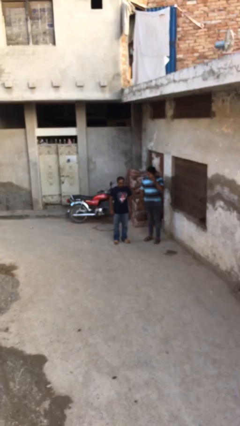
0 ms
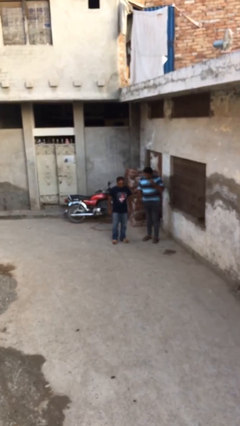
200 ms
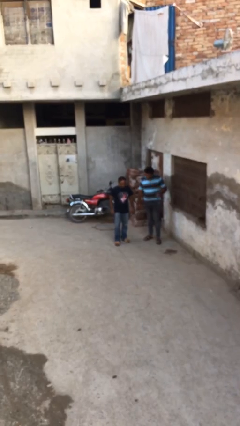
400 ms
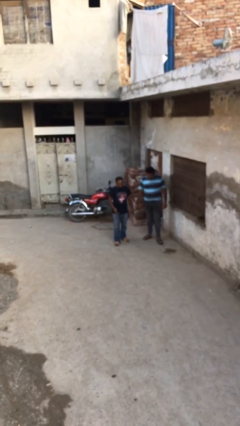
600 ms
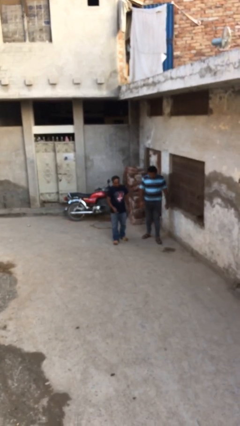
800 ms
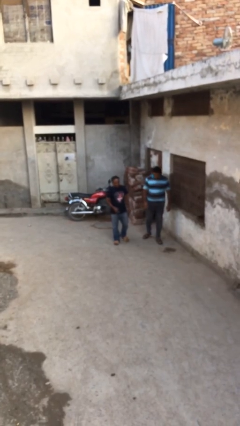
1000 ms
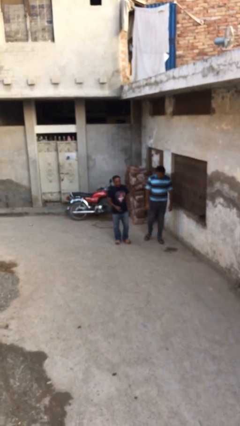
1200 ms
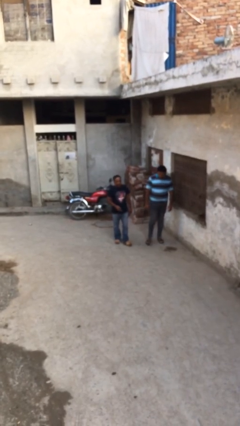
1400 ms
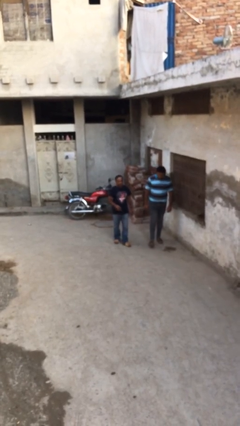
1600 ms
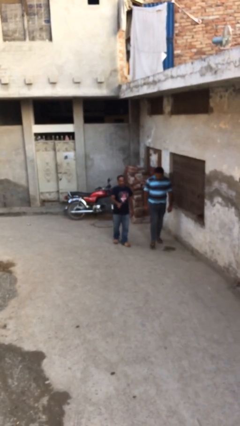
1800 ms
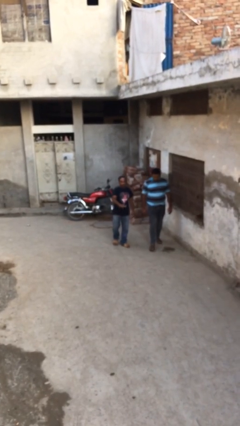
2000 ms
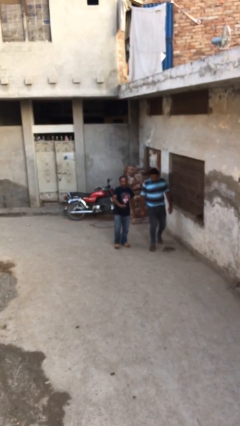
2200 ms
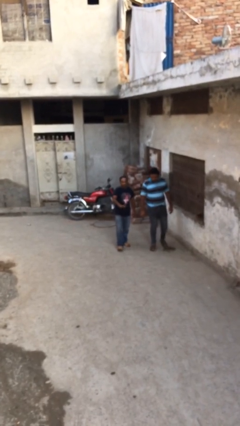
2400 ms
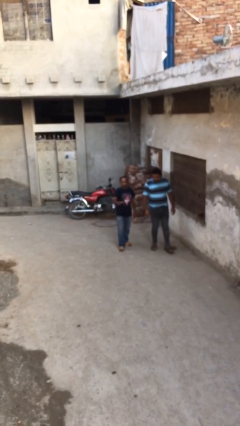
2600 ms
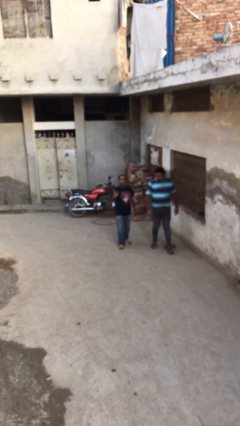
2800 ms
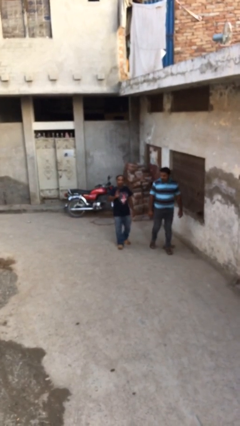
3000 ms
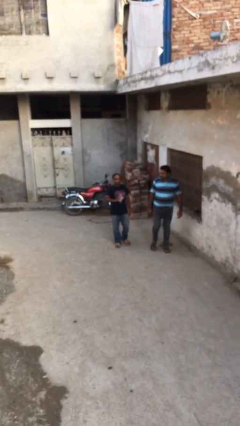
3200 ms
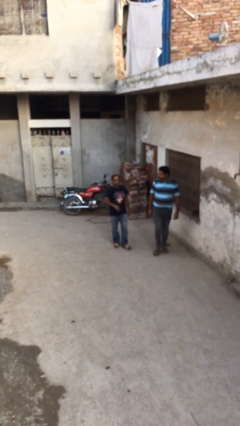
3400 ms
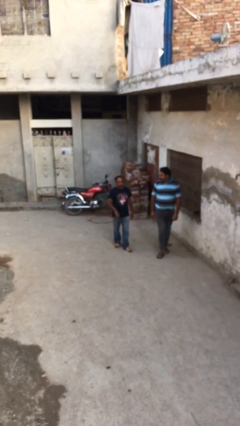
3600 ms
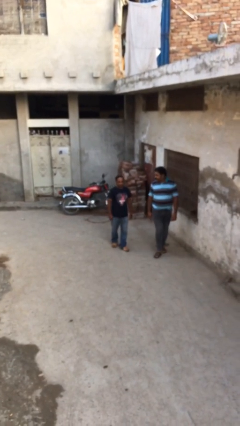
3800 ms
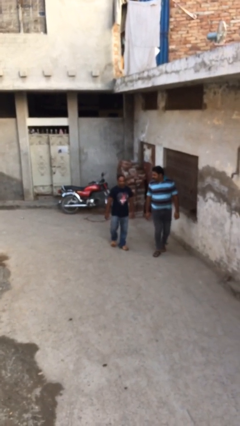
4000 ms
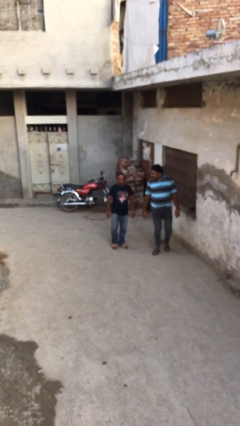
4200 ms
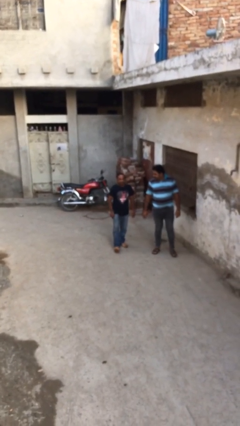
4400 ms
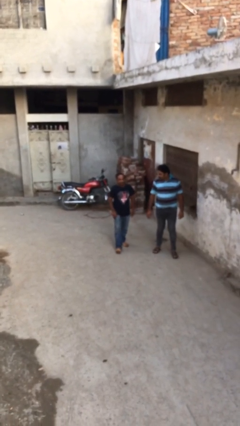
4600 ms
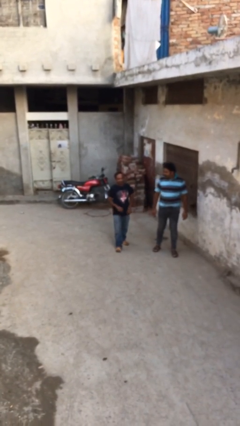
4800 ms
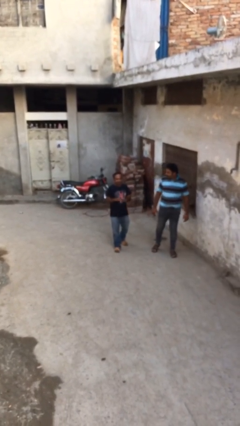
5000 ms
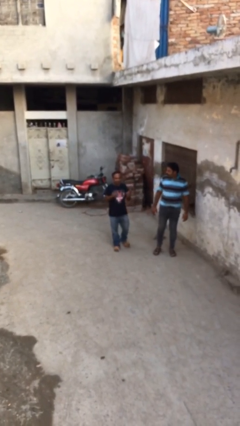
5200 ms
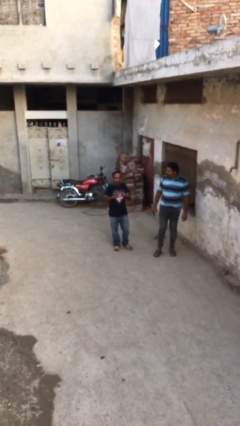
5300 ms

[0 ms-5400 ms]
person talks to person

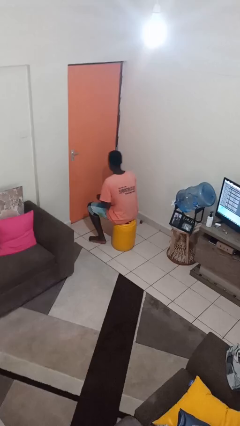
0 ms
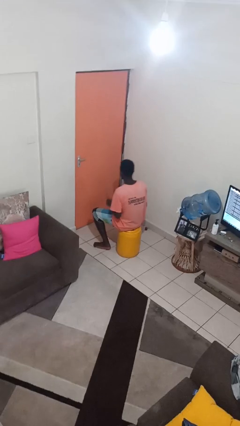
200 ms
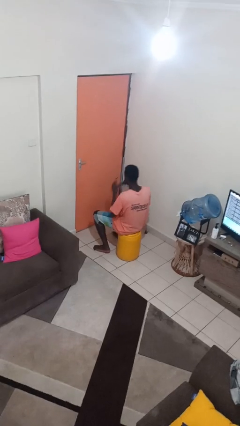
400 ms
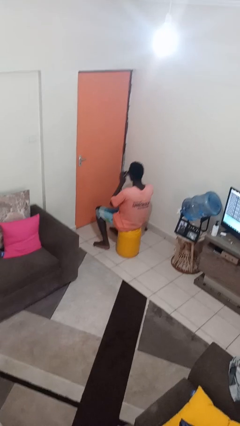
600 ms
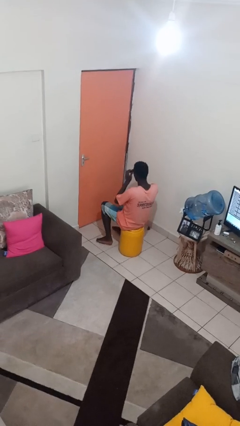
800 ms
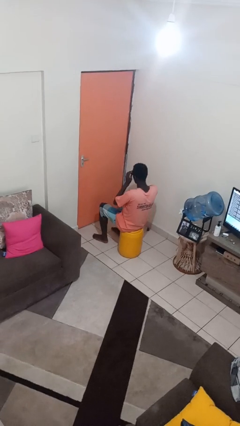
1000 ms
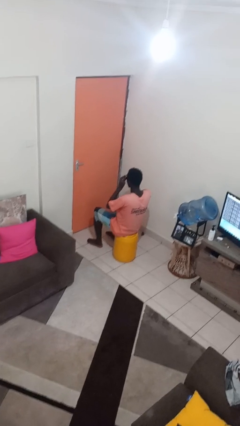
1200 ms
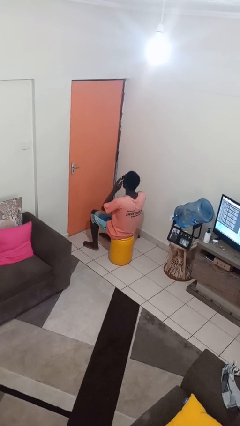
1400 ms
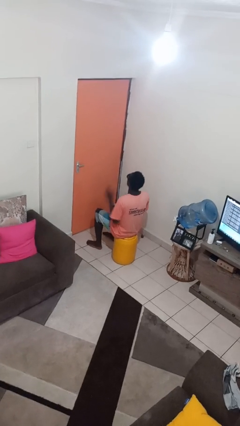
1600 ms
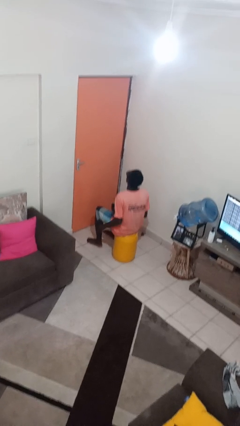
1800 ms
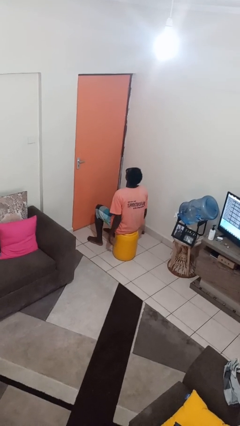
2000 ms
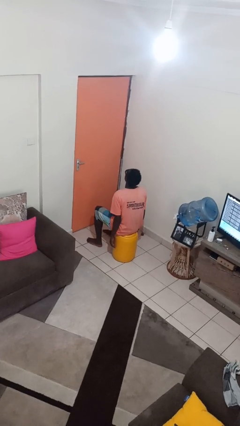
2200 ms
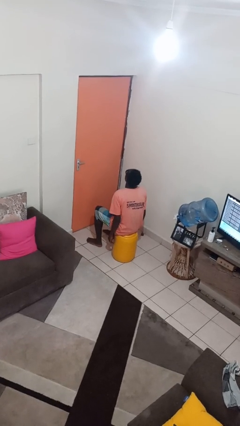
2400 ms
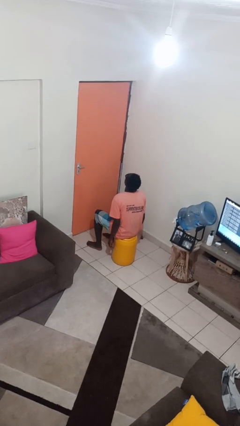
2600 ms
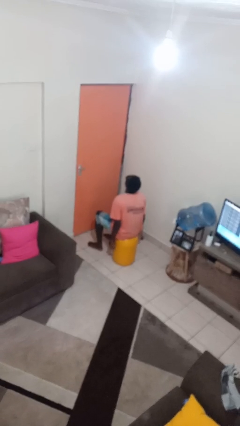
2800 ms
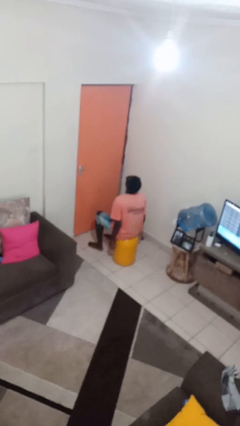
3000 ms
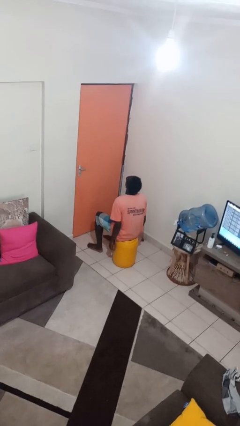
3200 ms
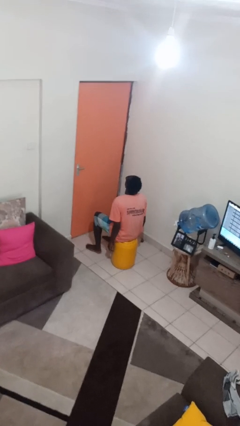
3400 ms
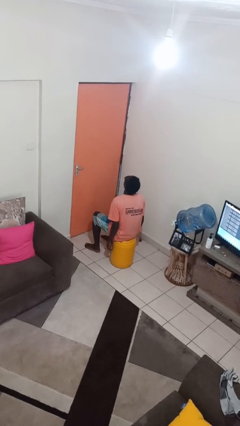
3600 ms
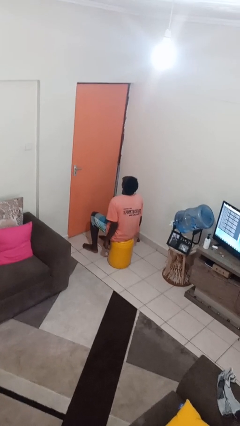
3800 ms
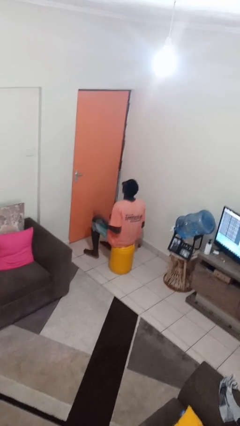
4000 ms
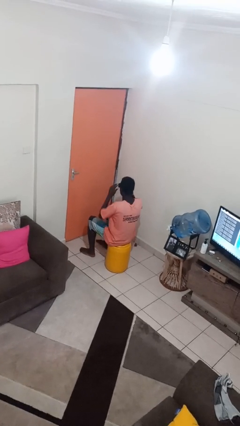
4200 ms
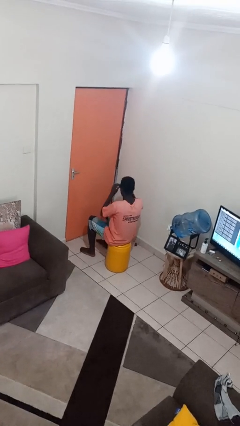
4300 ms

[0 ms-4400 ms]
person puts on sunglasses

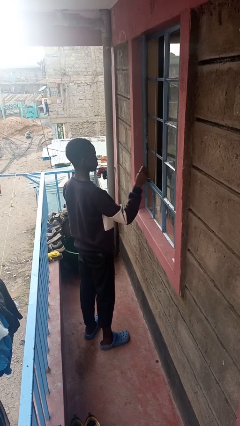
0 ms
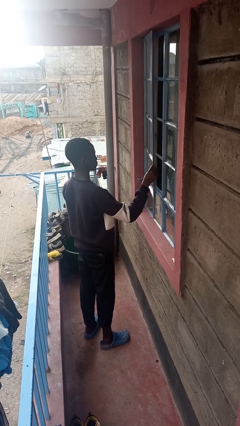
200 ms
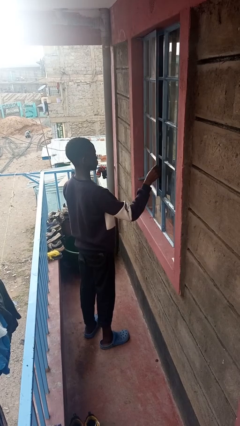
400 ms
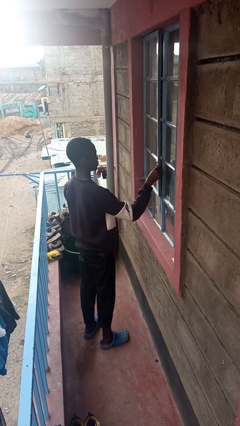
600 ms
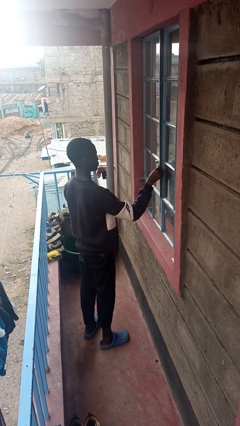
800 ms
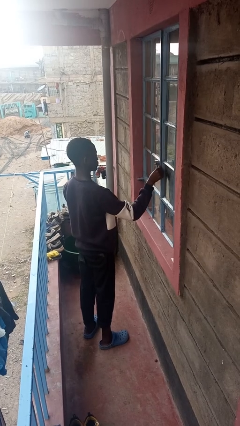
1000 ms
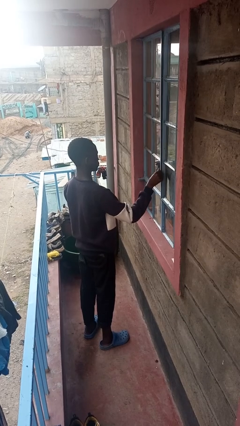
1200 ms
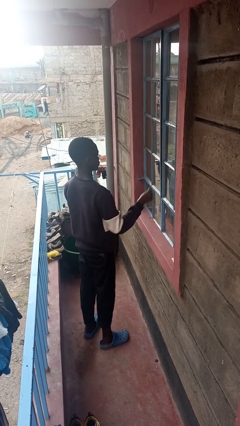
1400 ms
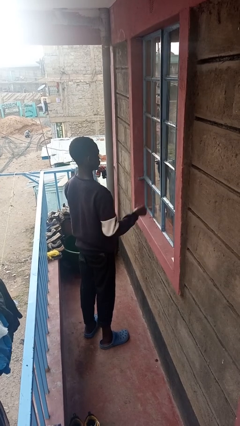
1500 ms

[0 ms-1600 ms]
person closes home window

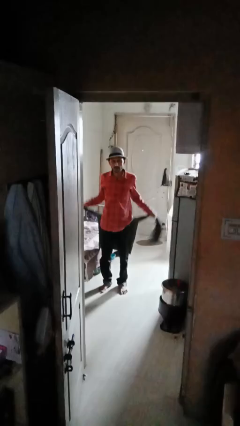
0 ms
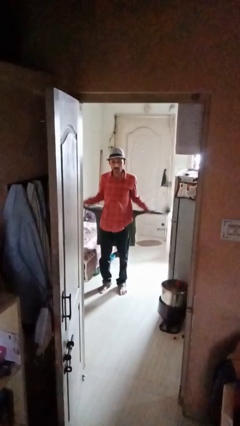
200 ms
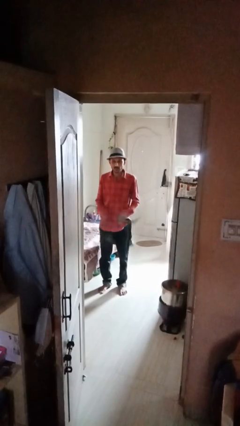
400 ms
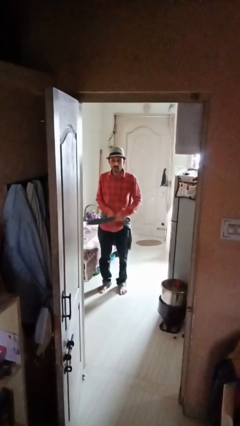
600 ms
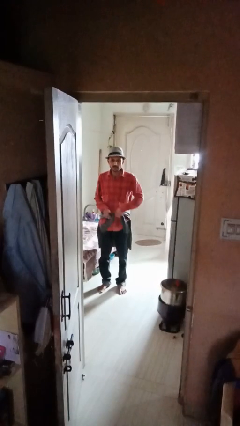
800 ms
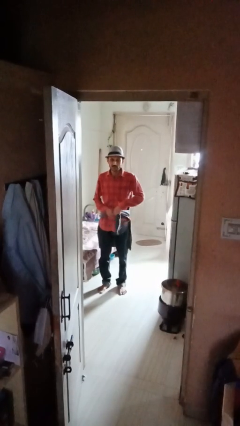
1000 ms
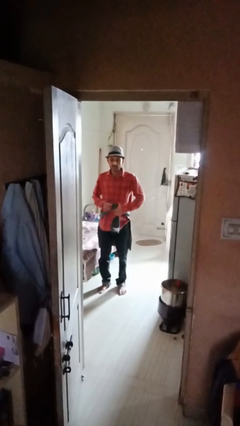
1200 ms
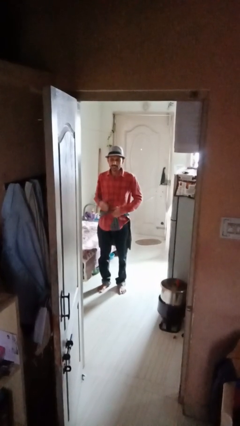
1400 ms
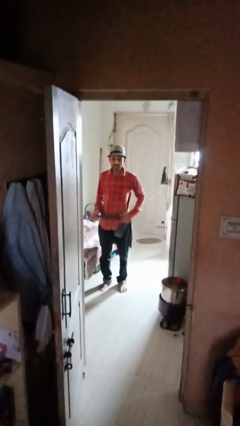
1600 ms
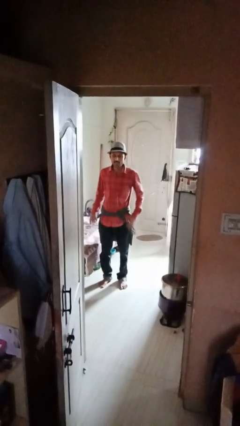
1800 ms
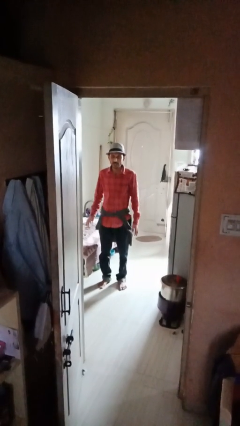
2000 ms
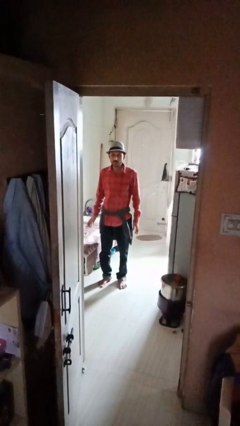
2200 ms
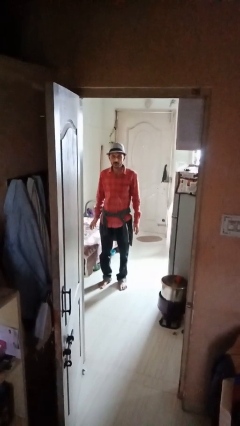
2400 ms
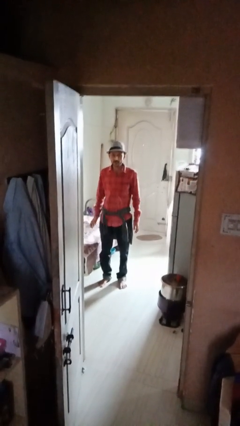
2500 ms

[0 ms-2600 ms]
person ties jacket around waist

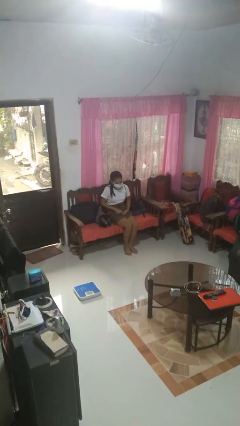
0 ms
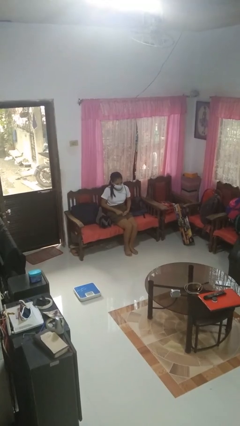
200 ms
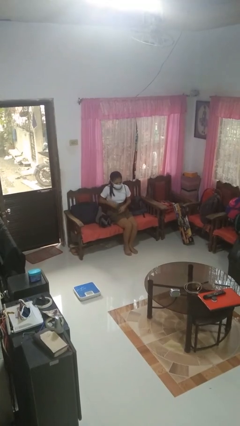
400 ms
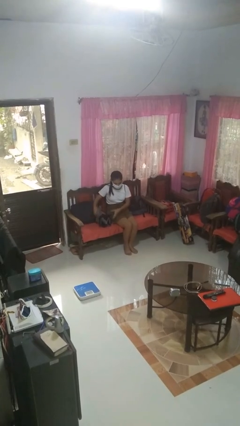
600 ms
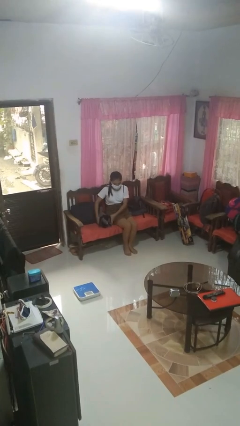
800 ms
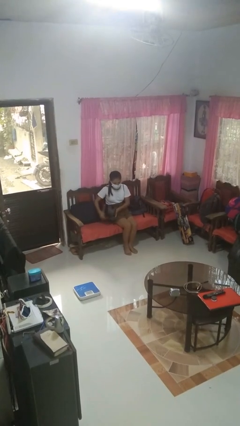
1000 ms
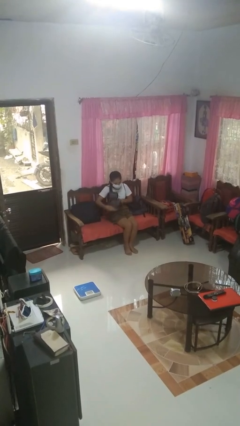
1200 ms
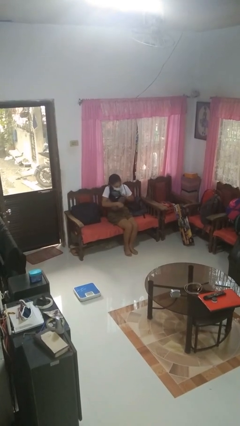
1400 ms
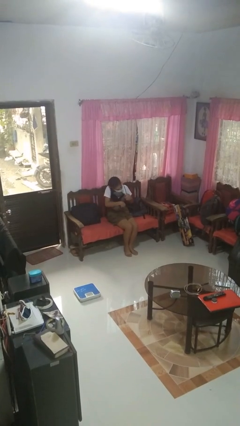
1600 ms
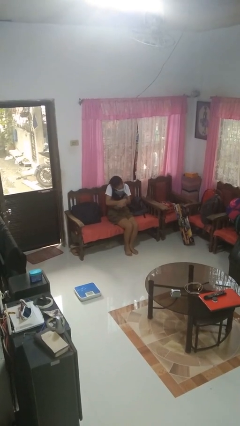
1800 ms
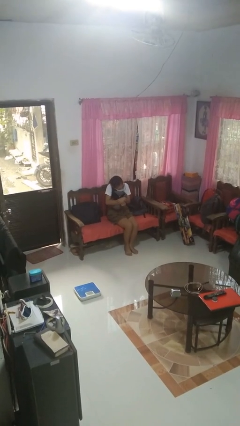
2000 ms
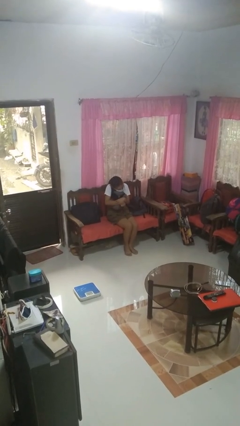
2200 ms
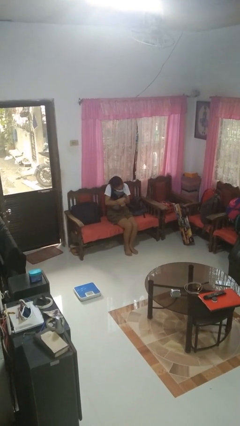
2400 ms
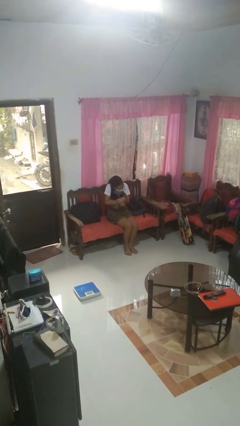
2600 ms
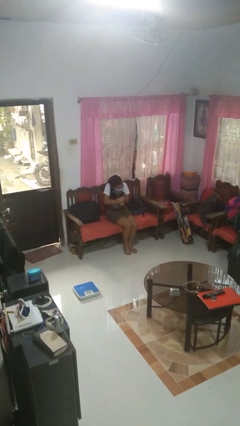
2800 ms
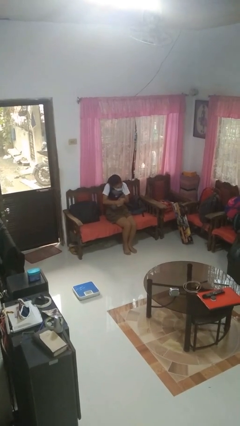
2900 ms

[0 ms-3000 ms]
person hugs stuffed animal

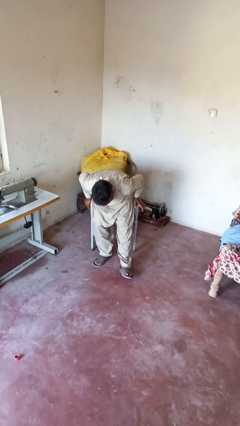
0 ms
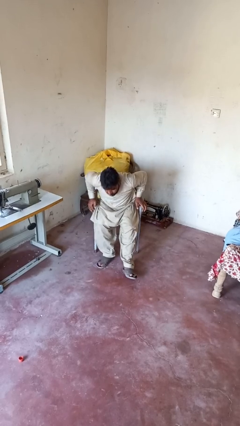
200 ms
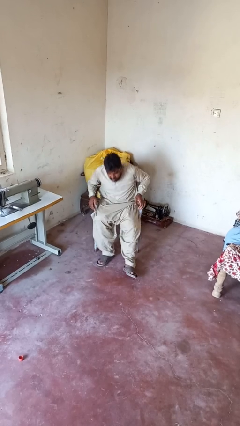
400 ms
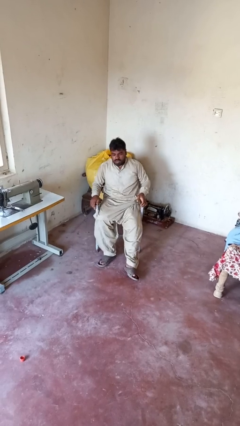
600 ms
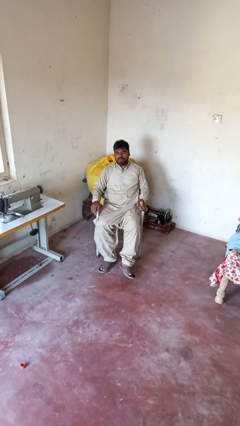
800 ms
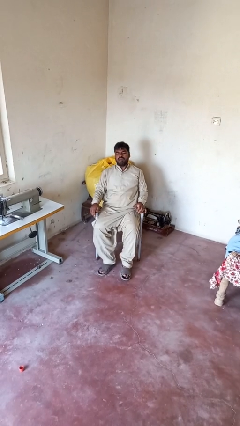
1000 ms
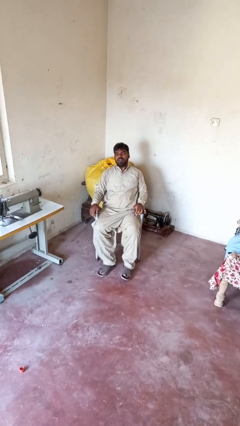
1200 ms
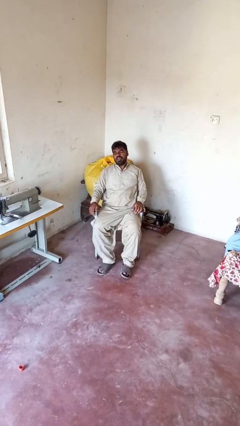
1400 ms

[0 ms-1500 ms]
person sits down
